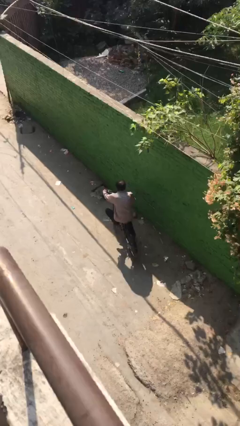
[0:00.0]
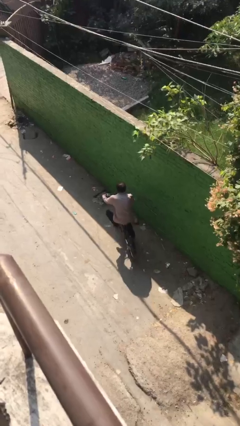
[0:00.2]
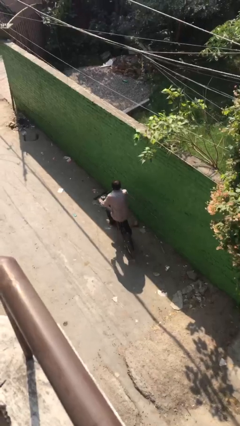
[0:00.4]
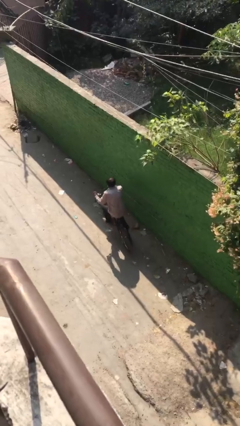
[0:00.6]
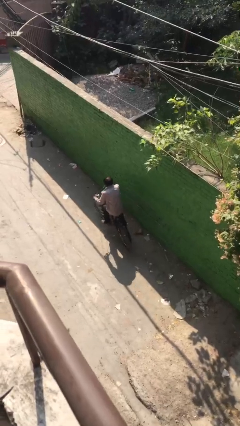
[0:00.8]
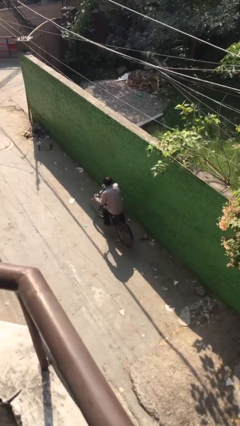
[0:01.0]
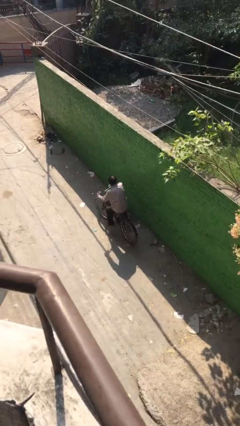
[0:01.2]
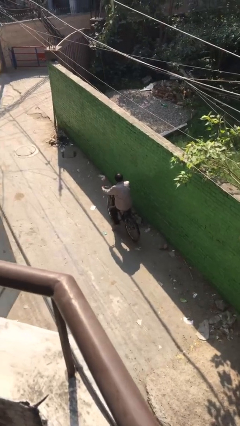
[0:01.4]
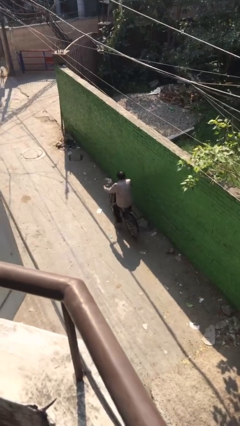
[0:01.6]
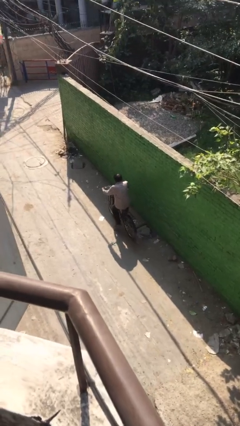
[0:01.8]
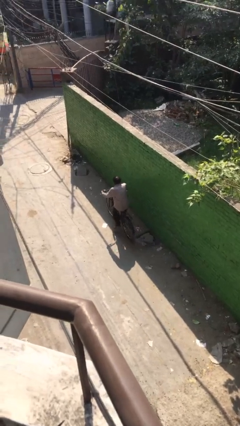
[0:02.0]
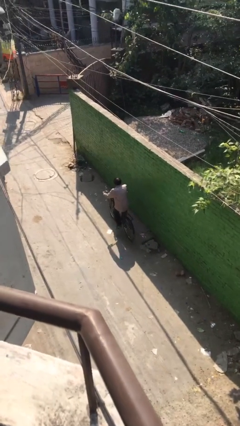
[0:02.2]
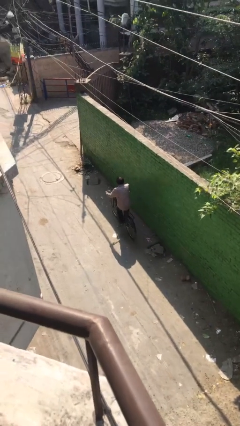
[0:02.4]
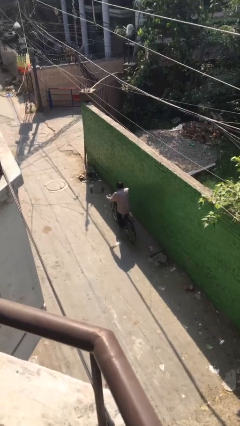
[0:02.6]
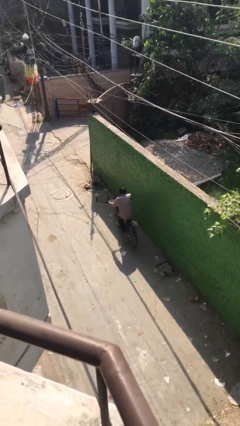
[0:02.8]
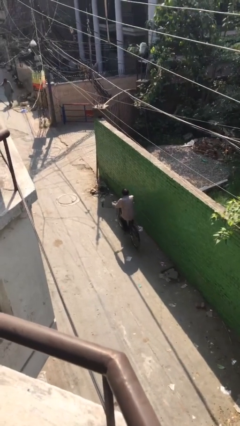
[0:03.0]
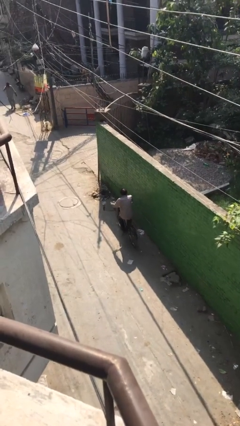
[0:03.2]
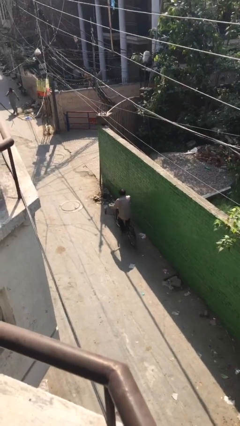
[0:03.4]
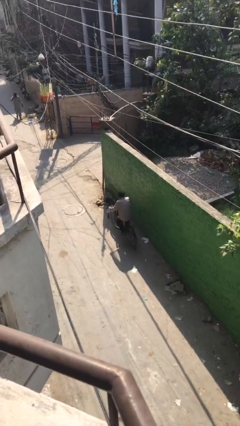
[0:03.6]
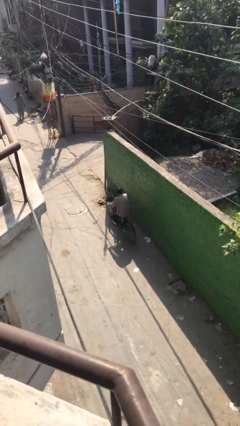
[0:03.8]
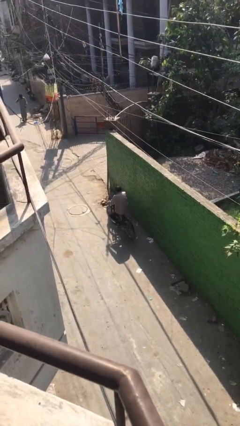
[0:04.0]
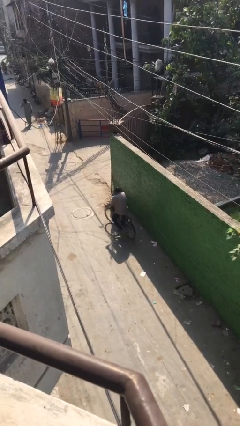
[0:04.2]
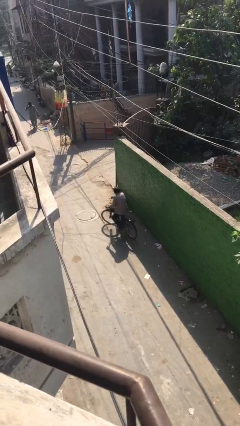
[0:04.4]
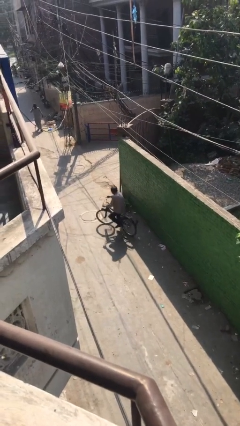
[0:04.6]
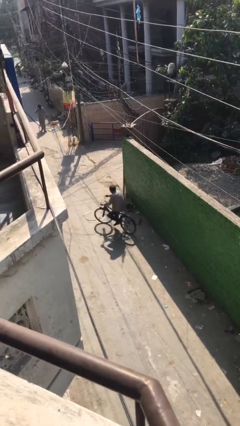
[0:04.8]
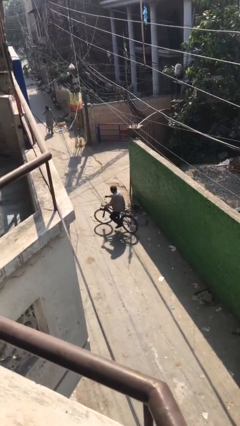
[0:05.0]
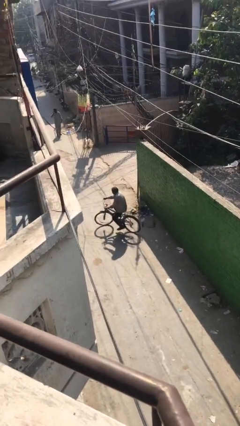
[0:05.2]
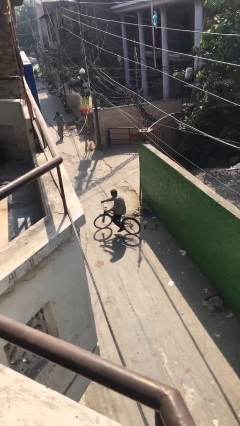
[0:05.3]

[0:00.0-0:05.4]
person rides bicycle

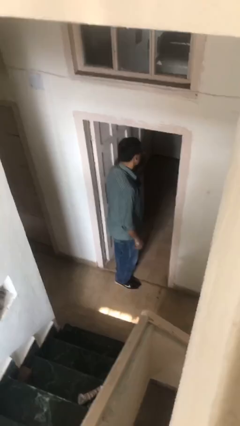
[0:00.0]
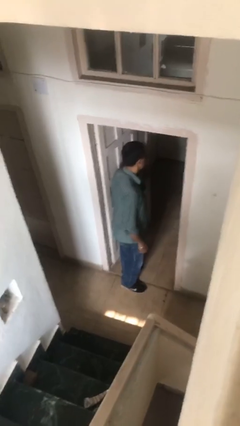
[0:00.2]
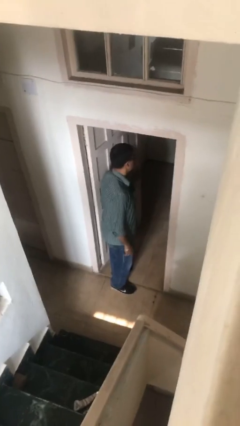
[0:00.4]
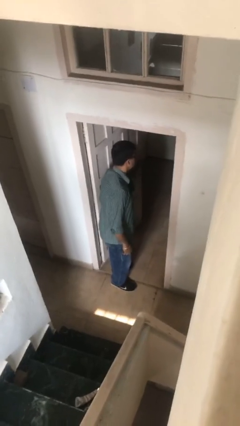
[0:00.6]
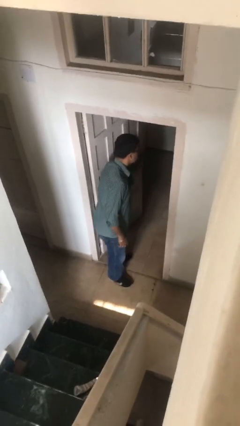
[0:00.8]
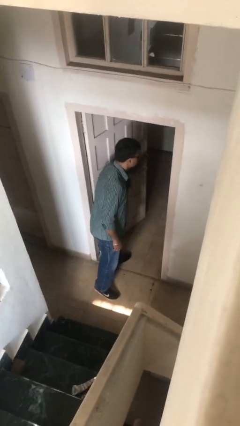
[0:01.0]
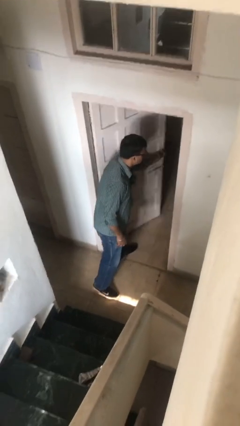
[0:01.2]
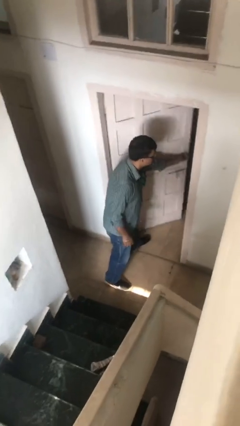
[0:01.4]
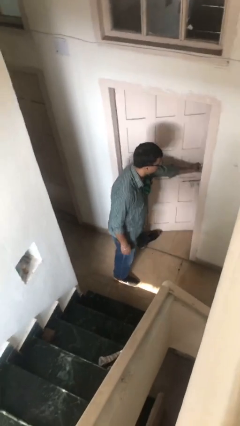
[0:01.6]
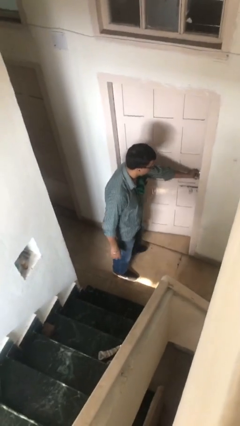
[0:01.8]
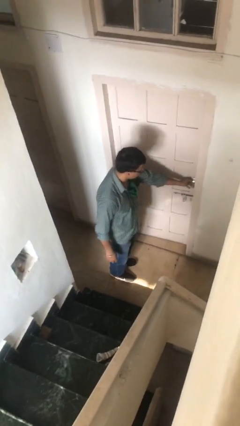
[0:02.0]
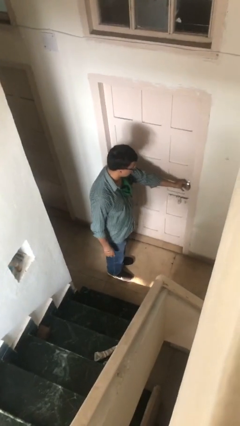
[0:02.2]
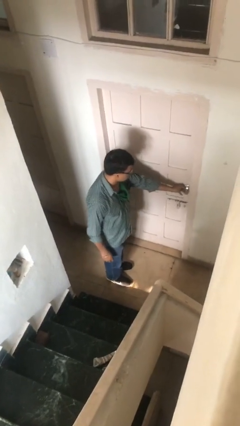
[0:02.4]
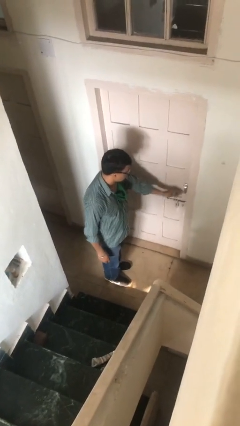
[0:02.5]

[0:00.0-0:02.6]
person closes facility door

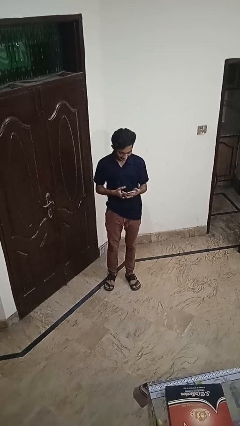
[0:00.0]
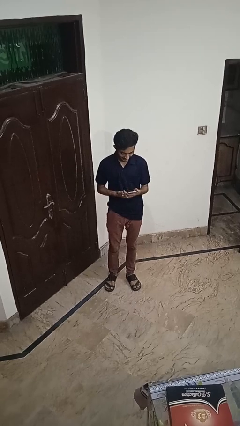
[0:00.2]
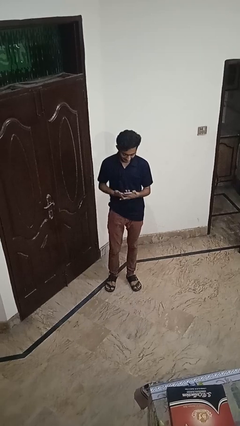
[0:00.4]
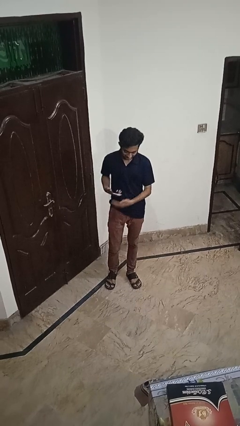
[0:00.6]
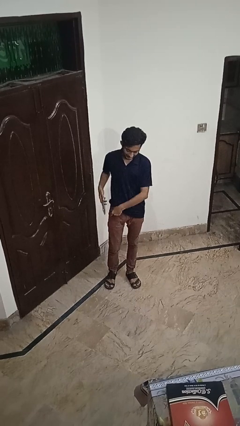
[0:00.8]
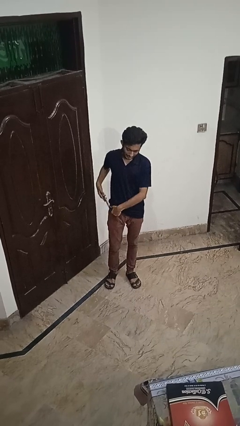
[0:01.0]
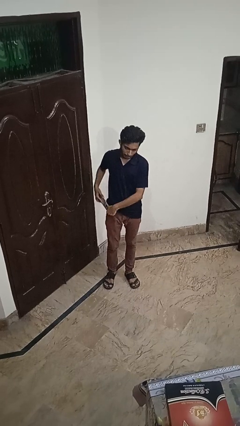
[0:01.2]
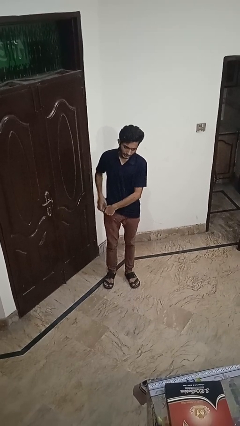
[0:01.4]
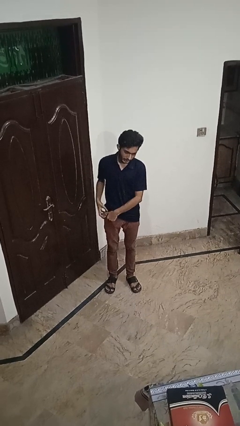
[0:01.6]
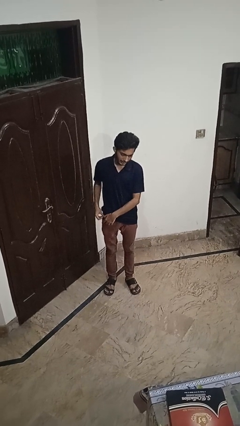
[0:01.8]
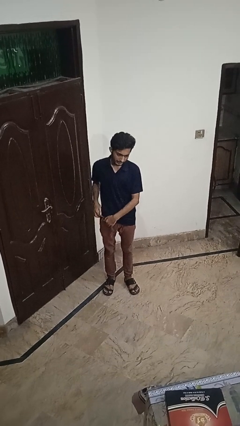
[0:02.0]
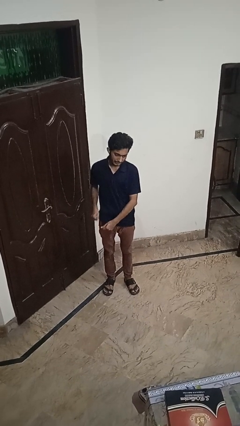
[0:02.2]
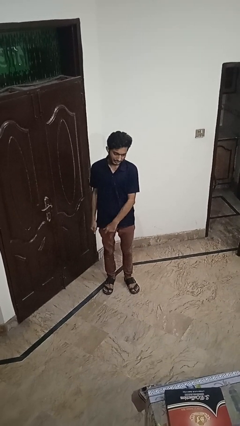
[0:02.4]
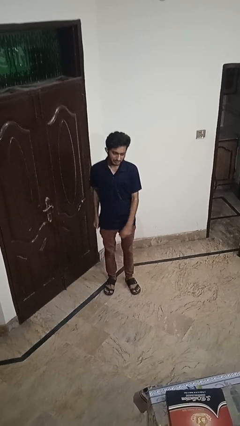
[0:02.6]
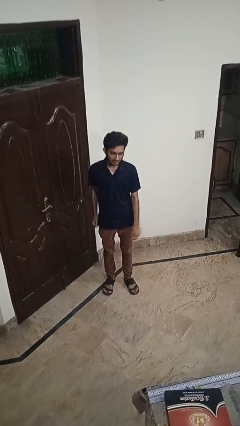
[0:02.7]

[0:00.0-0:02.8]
person puts phone into pocket

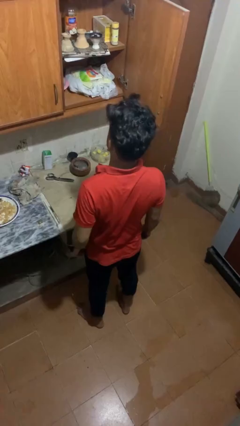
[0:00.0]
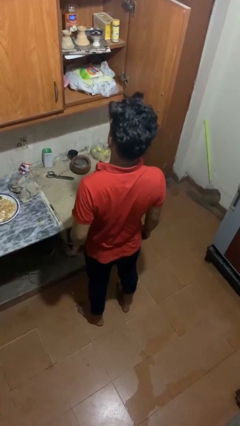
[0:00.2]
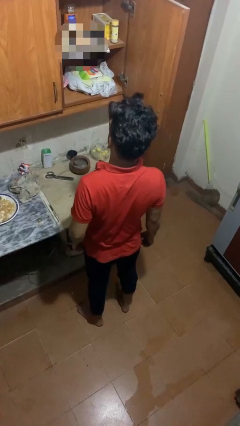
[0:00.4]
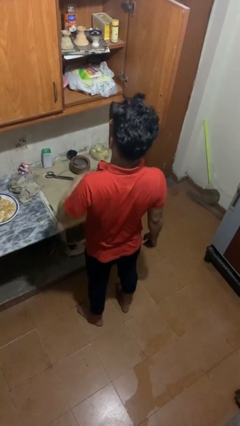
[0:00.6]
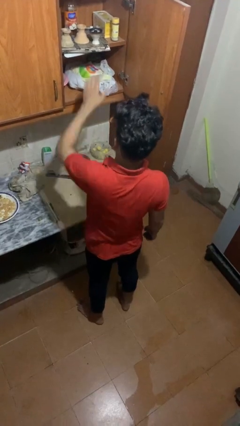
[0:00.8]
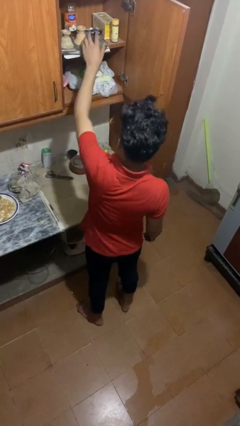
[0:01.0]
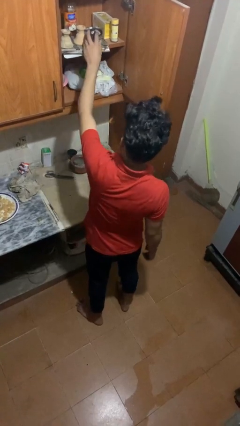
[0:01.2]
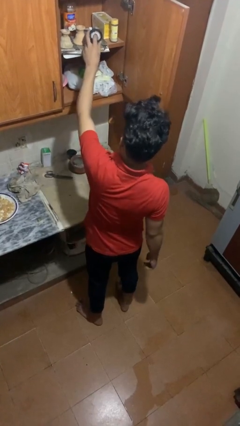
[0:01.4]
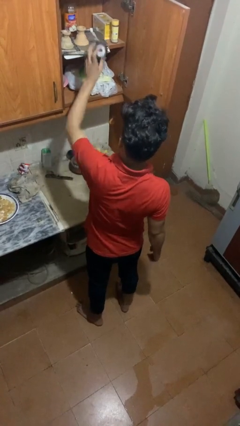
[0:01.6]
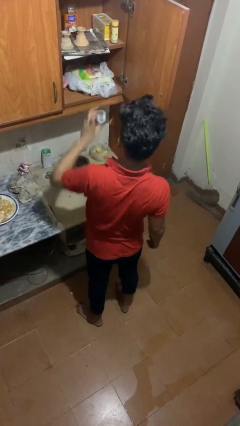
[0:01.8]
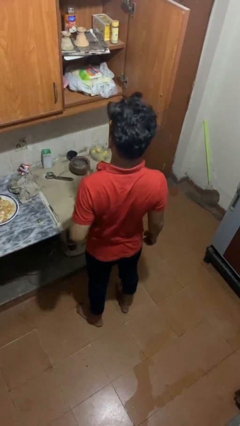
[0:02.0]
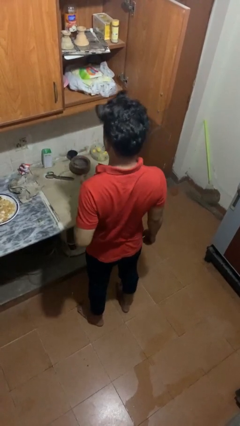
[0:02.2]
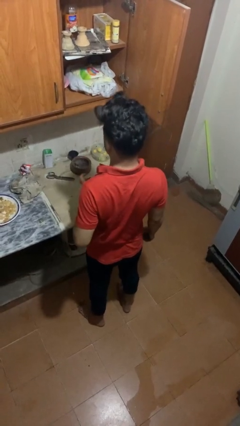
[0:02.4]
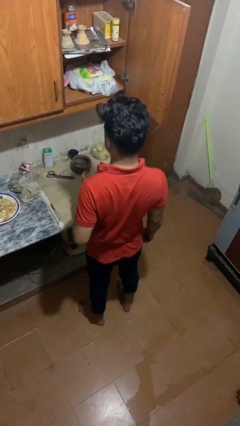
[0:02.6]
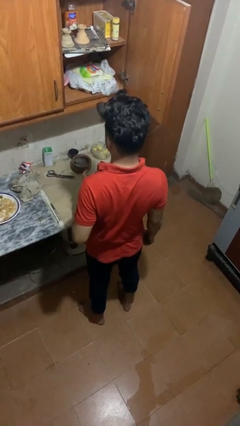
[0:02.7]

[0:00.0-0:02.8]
person takes object from cabinet

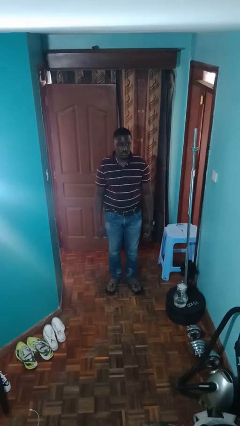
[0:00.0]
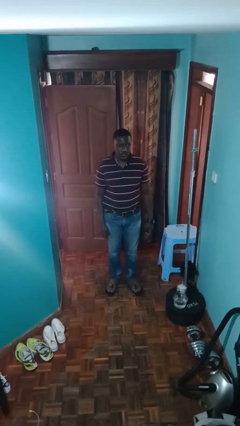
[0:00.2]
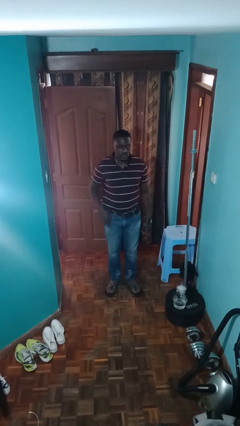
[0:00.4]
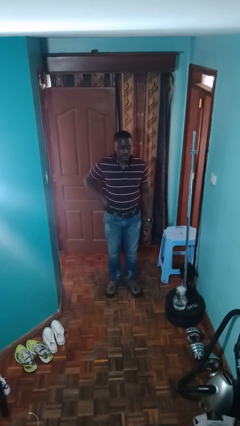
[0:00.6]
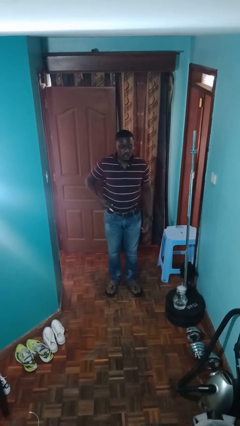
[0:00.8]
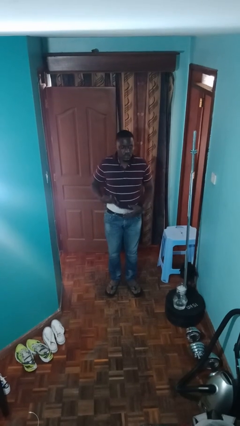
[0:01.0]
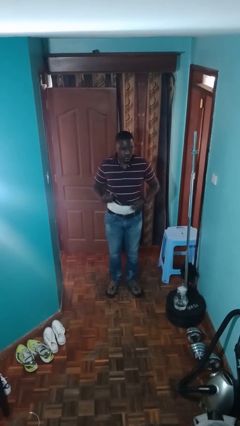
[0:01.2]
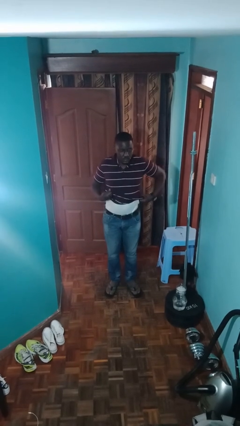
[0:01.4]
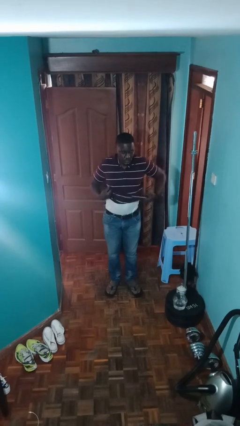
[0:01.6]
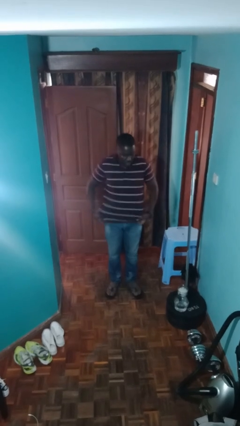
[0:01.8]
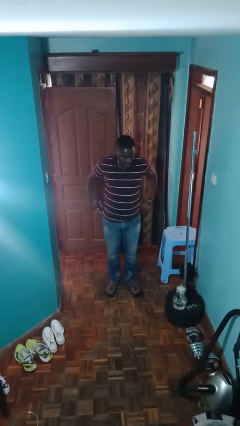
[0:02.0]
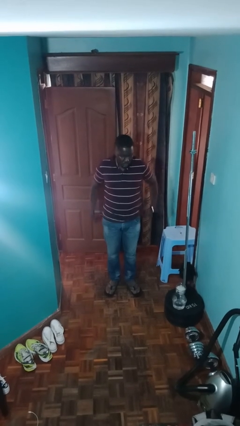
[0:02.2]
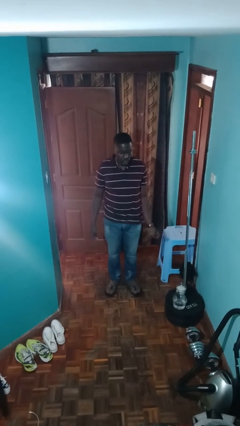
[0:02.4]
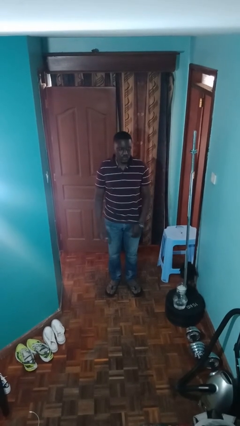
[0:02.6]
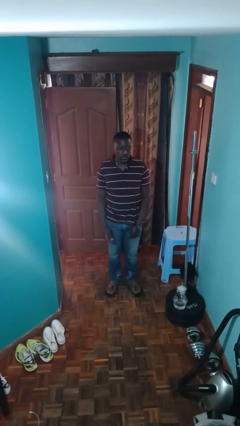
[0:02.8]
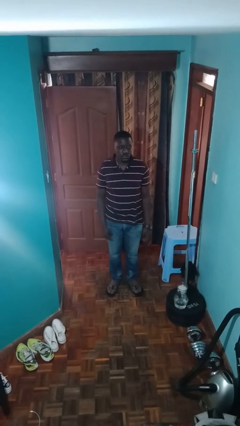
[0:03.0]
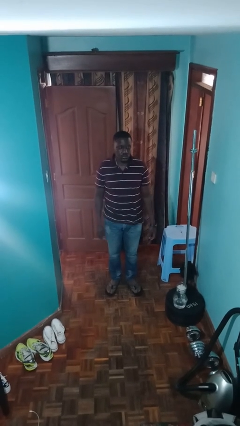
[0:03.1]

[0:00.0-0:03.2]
person untucks shirt

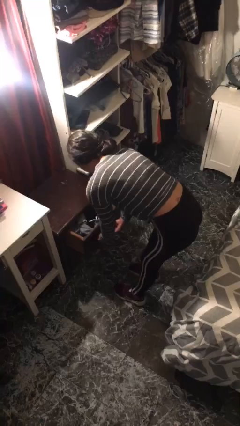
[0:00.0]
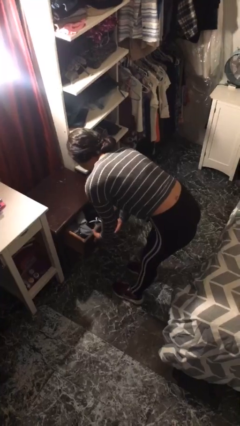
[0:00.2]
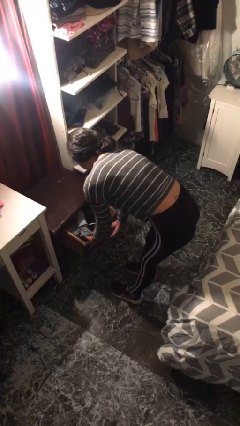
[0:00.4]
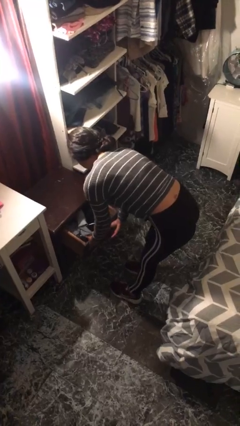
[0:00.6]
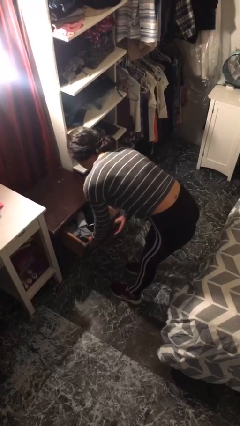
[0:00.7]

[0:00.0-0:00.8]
person opens dresser drawer
